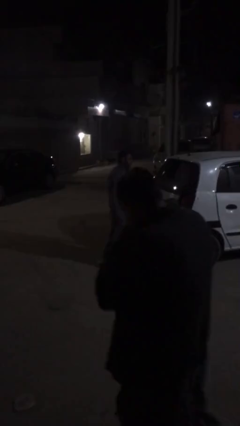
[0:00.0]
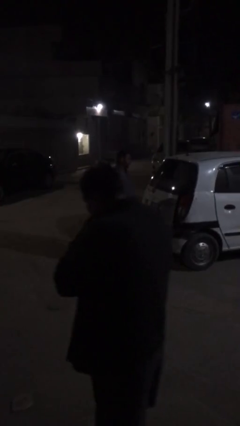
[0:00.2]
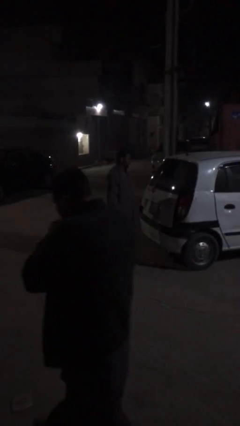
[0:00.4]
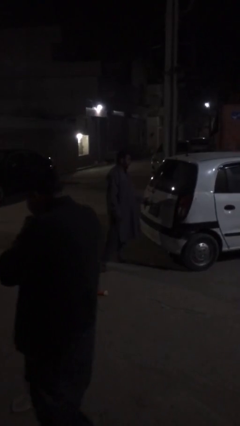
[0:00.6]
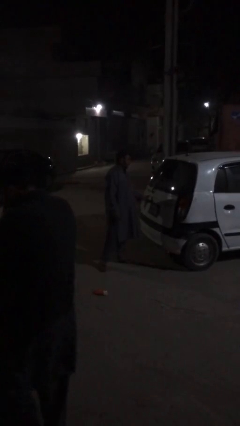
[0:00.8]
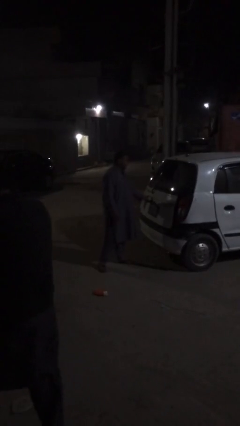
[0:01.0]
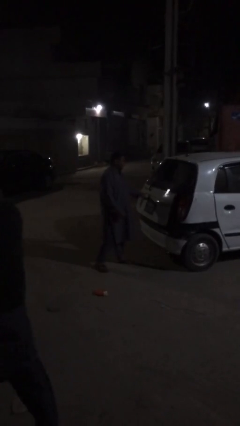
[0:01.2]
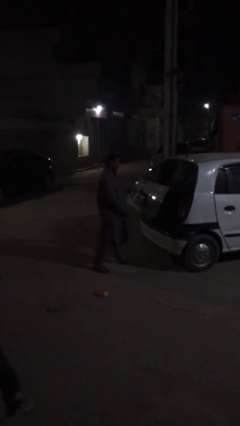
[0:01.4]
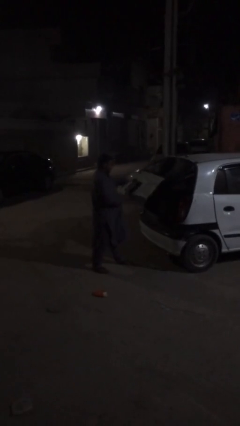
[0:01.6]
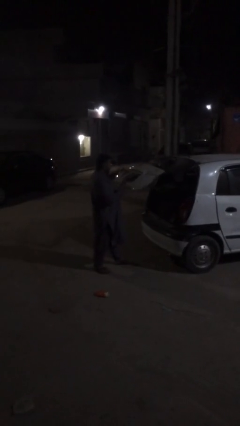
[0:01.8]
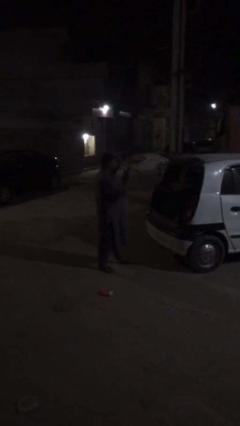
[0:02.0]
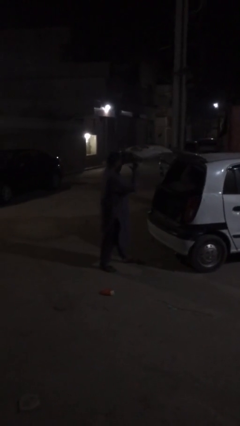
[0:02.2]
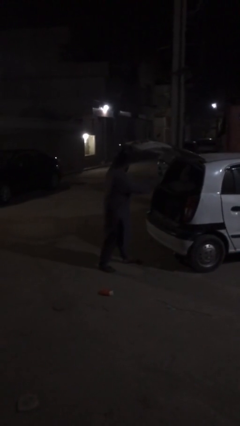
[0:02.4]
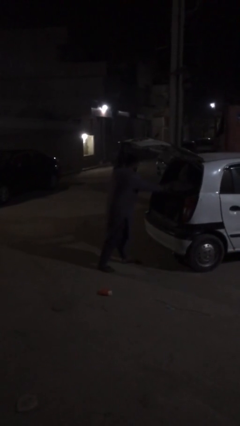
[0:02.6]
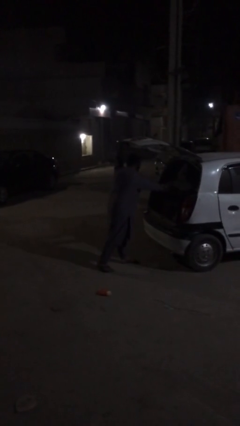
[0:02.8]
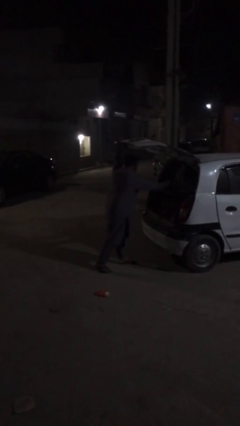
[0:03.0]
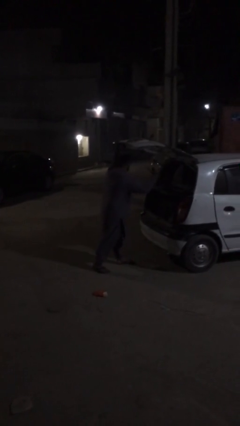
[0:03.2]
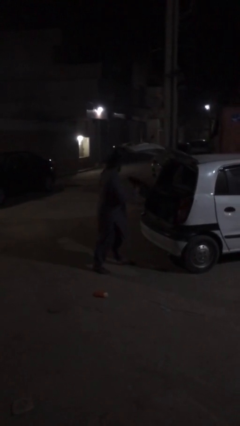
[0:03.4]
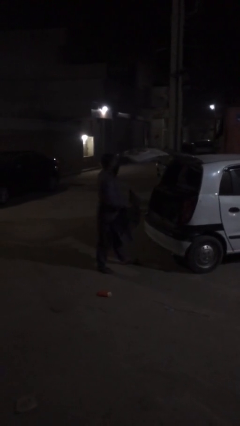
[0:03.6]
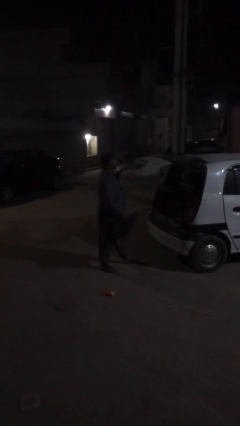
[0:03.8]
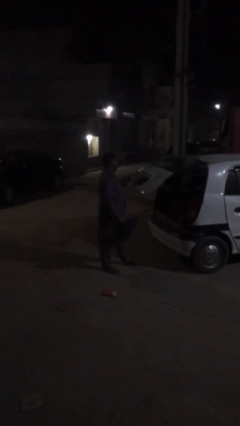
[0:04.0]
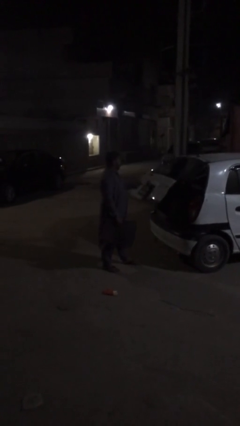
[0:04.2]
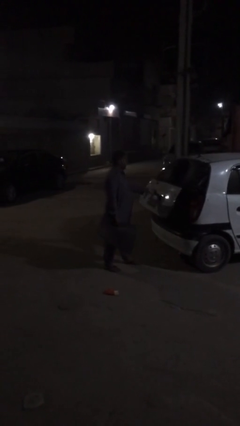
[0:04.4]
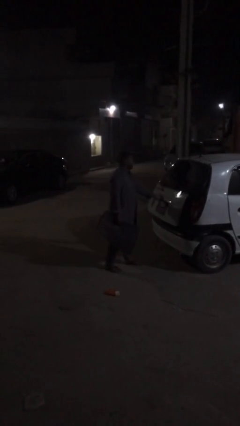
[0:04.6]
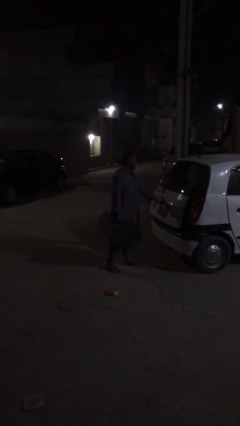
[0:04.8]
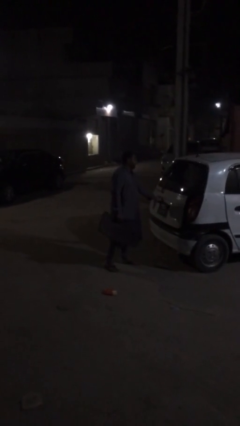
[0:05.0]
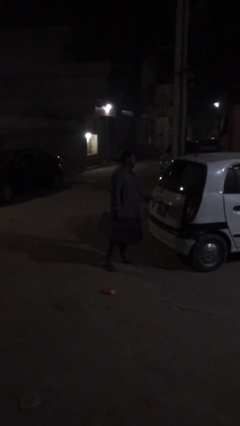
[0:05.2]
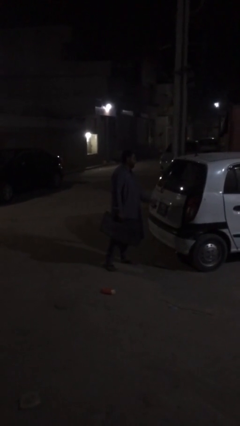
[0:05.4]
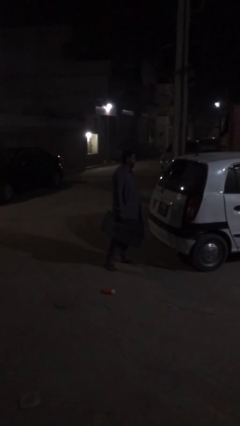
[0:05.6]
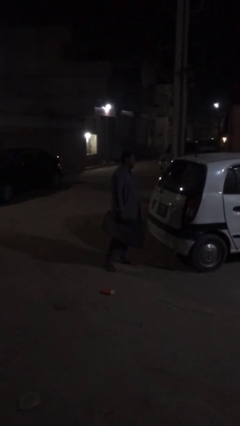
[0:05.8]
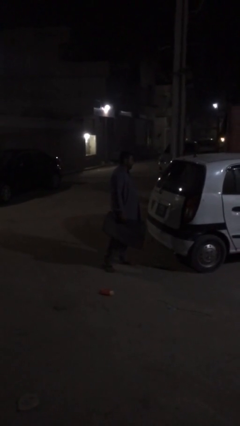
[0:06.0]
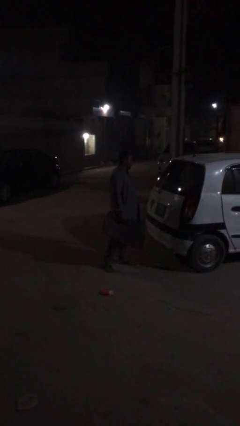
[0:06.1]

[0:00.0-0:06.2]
person unloads car

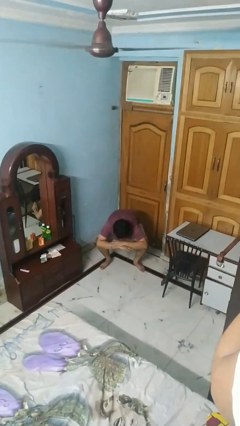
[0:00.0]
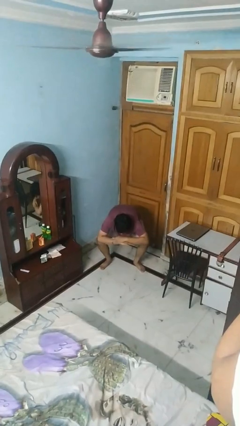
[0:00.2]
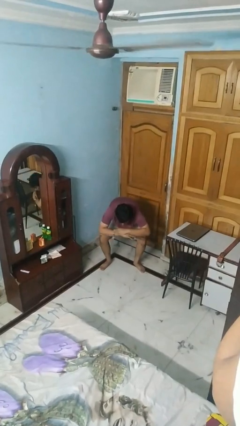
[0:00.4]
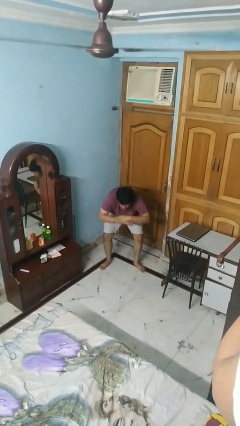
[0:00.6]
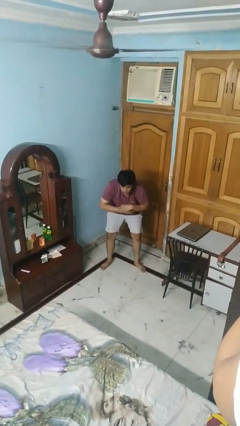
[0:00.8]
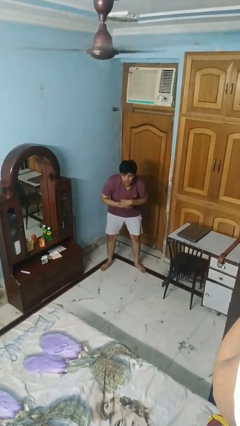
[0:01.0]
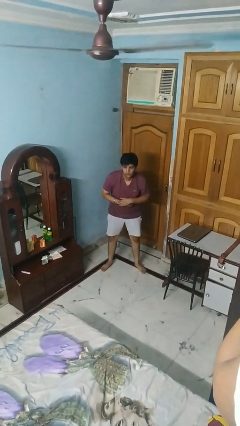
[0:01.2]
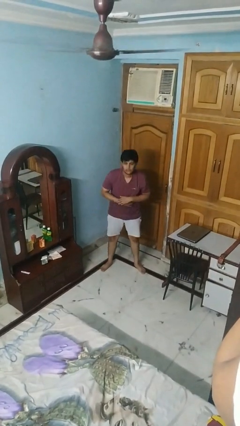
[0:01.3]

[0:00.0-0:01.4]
person stands up

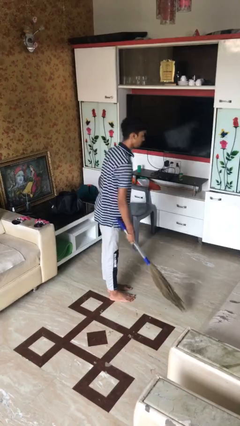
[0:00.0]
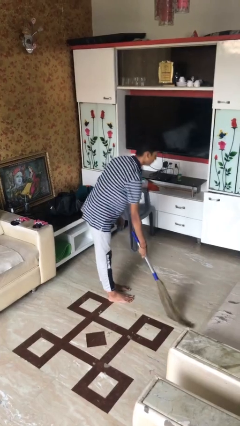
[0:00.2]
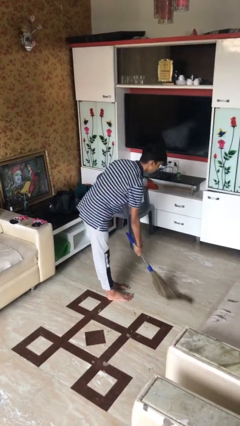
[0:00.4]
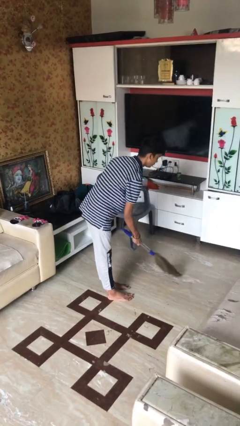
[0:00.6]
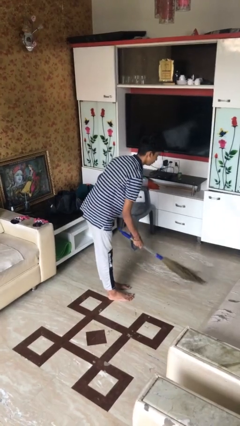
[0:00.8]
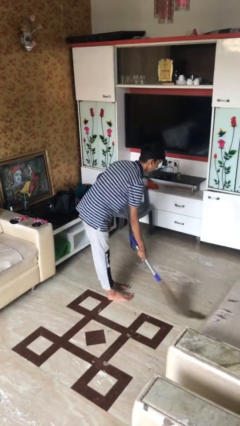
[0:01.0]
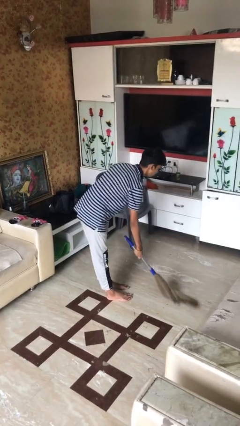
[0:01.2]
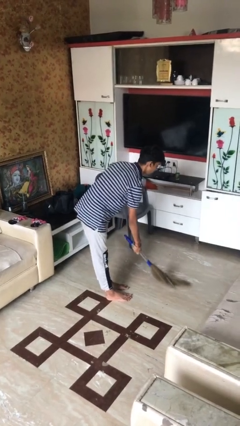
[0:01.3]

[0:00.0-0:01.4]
person sweeps floor

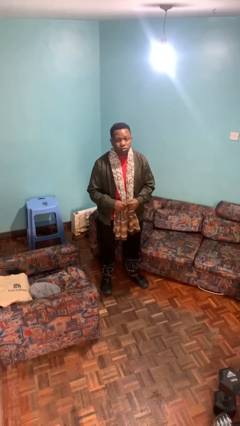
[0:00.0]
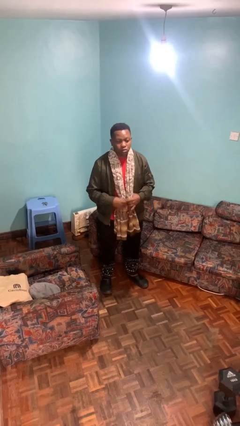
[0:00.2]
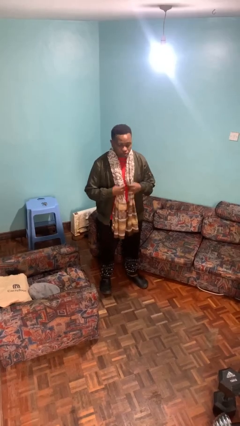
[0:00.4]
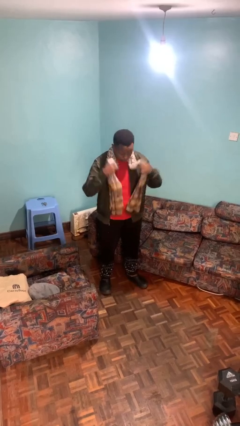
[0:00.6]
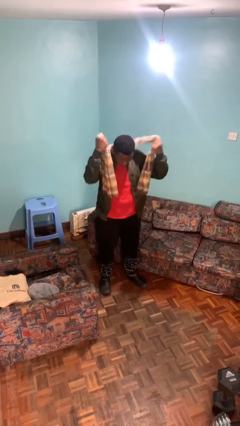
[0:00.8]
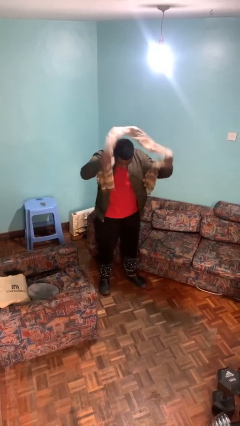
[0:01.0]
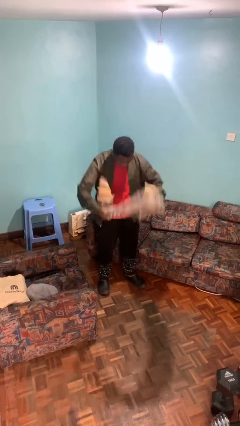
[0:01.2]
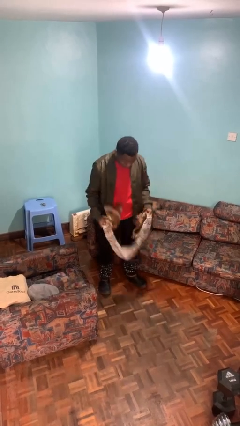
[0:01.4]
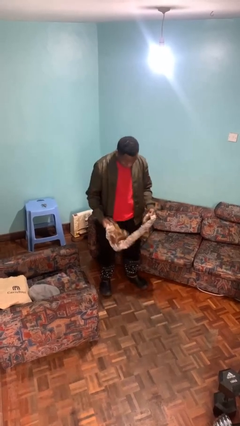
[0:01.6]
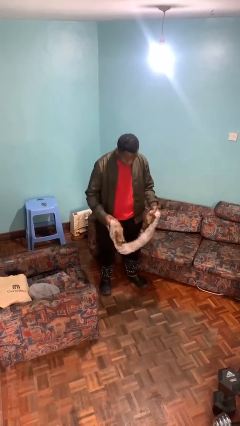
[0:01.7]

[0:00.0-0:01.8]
person takes off scarf

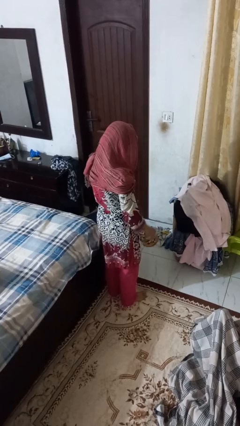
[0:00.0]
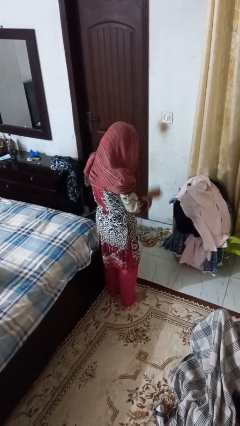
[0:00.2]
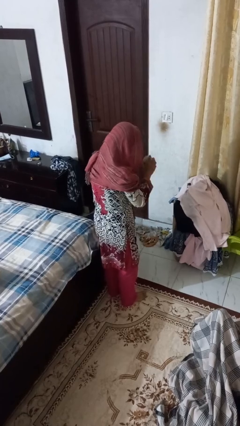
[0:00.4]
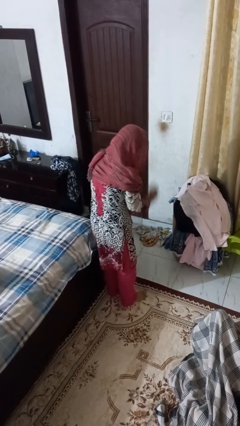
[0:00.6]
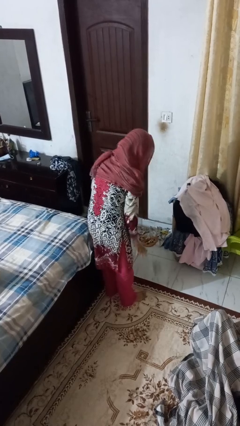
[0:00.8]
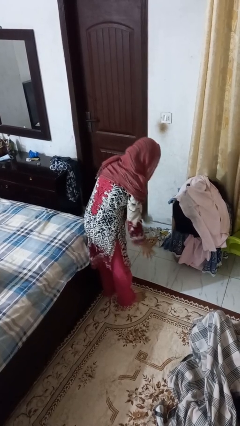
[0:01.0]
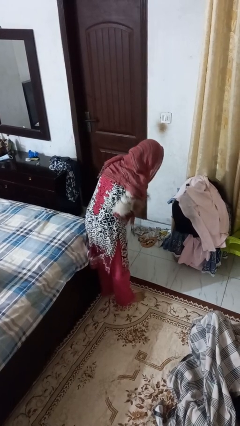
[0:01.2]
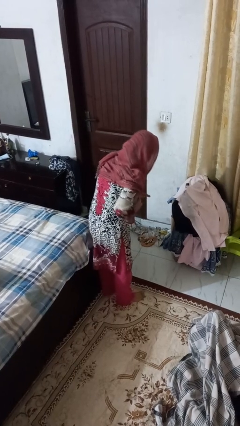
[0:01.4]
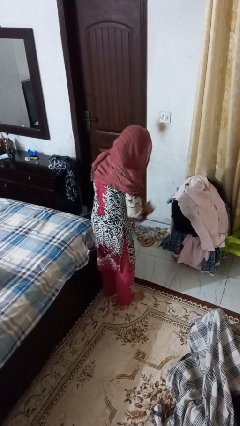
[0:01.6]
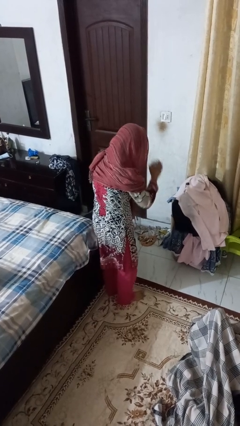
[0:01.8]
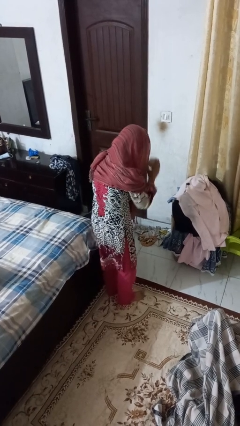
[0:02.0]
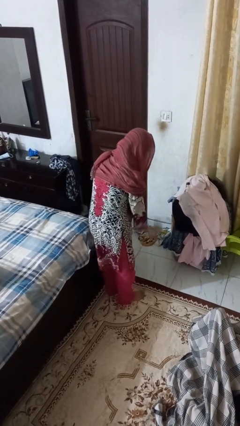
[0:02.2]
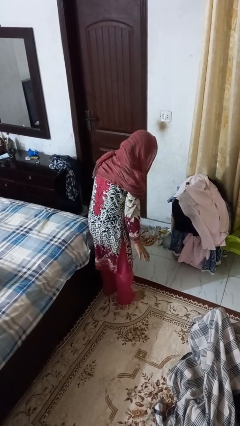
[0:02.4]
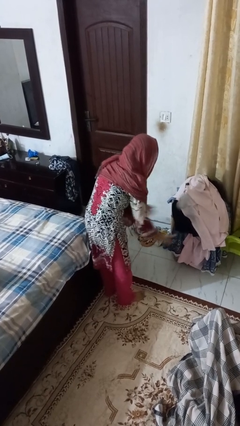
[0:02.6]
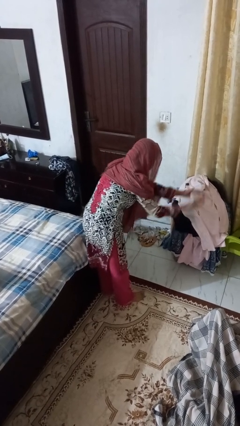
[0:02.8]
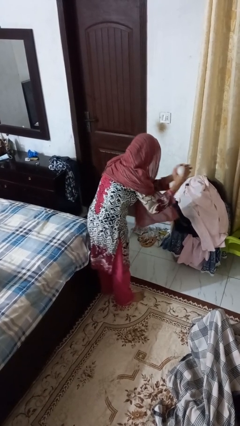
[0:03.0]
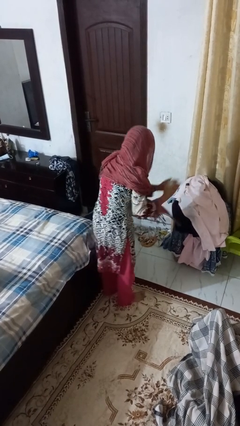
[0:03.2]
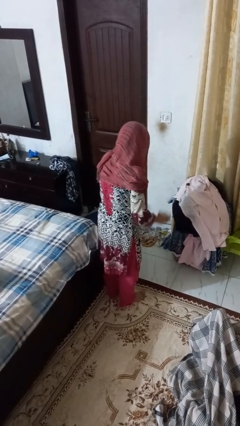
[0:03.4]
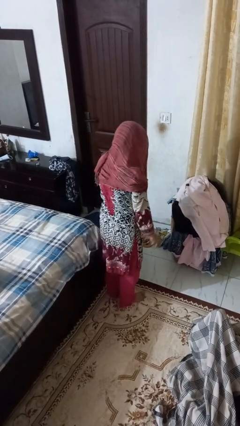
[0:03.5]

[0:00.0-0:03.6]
person bounces ball on floor

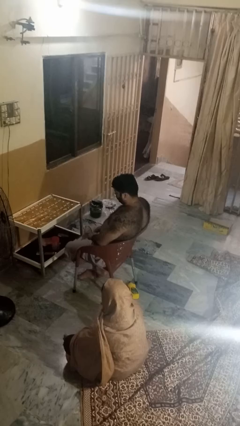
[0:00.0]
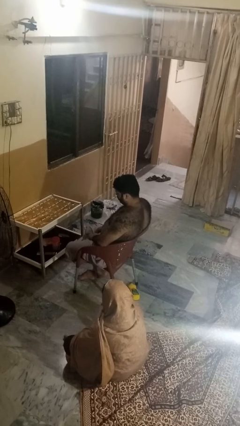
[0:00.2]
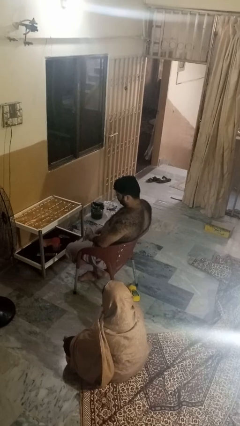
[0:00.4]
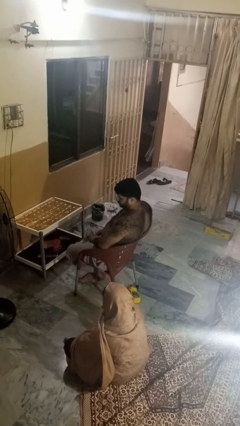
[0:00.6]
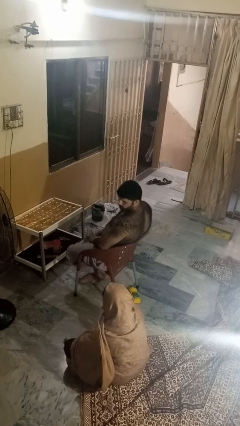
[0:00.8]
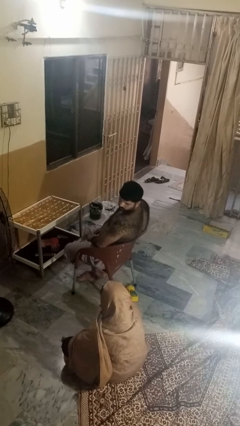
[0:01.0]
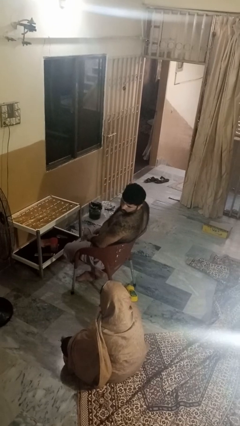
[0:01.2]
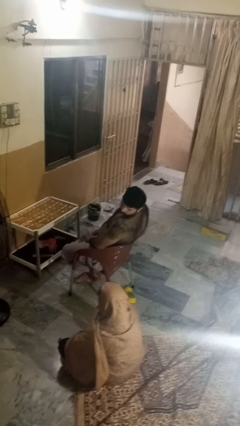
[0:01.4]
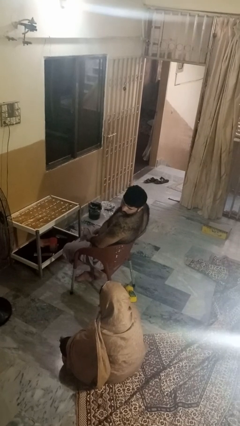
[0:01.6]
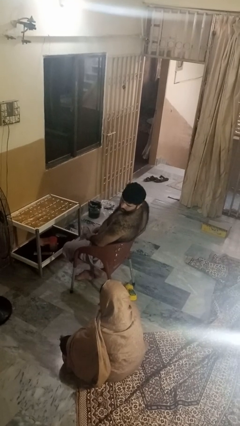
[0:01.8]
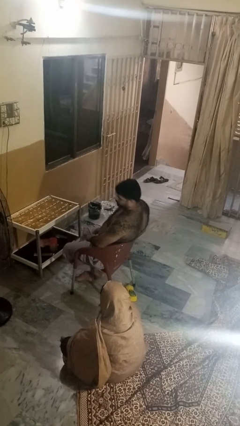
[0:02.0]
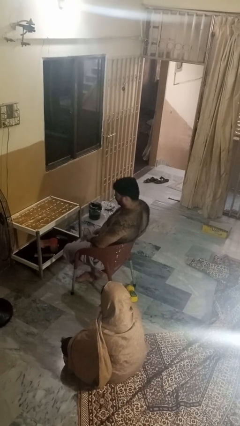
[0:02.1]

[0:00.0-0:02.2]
person looks over shoulder

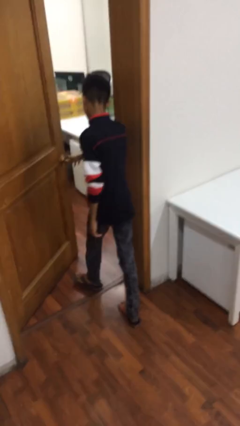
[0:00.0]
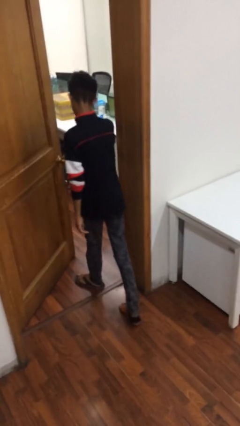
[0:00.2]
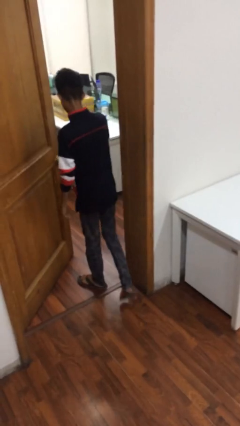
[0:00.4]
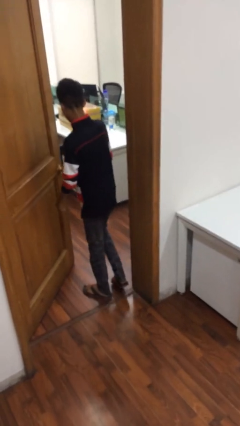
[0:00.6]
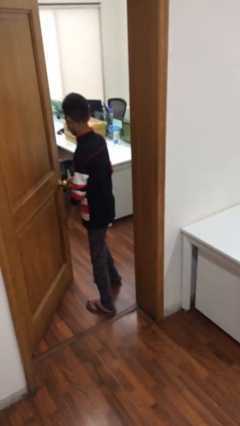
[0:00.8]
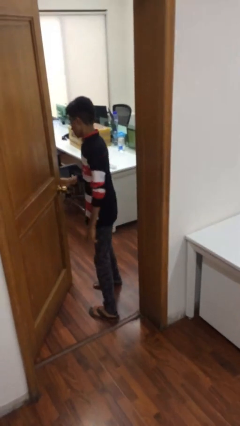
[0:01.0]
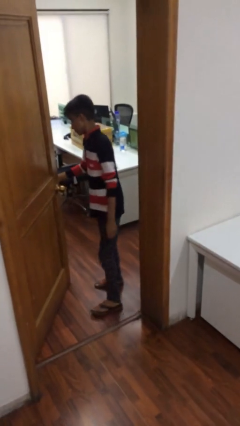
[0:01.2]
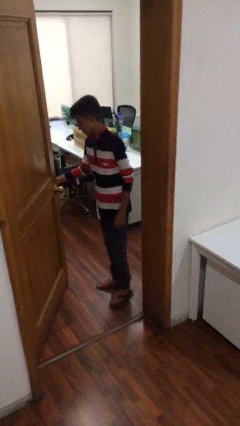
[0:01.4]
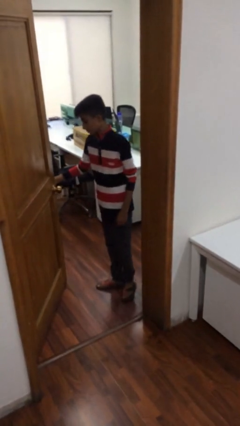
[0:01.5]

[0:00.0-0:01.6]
person exits scene through structure
